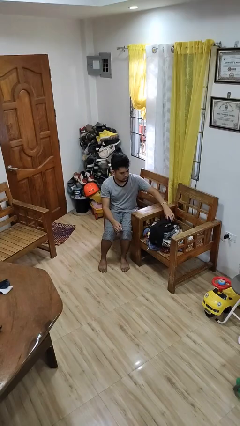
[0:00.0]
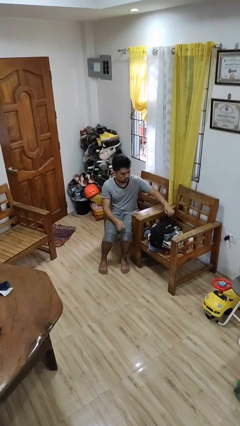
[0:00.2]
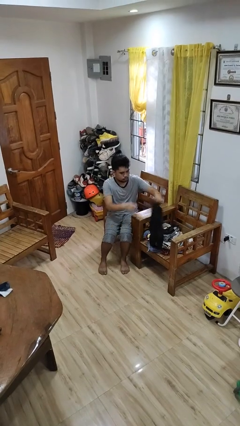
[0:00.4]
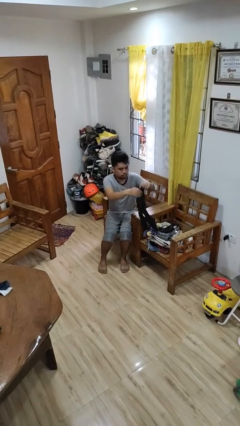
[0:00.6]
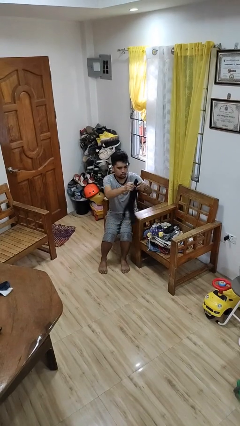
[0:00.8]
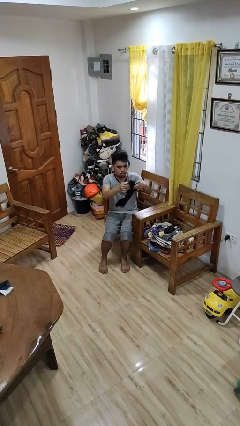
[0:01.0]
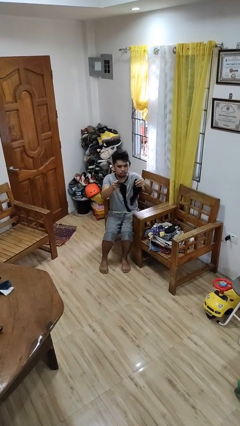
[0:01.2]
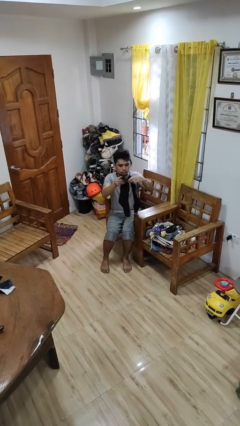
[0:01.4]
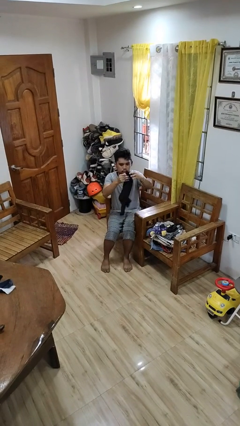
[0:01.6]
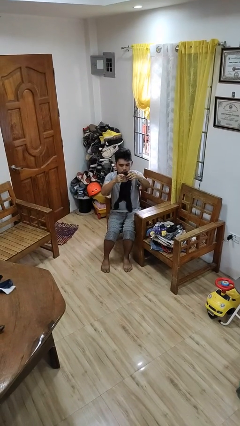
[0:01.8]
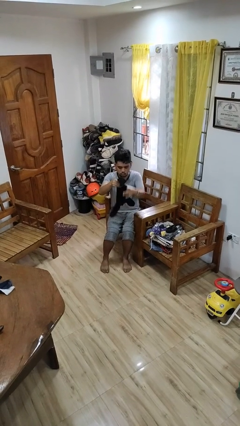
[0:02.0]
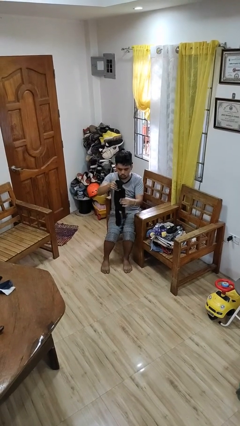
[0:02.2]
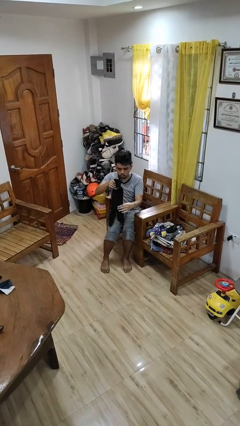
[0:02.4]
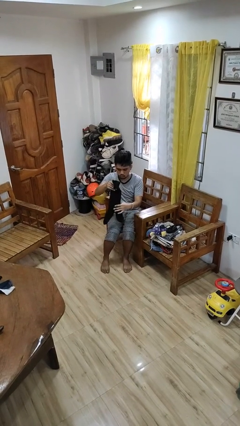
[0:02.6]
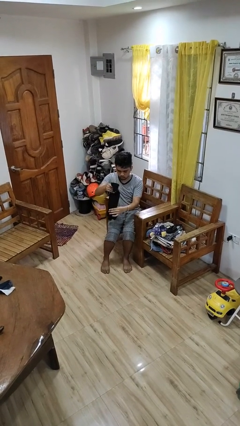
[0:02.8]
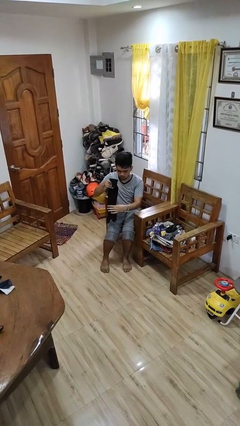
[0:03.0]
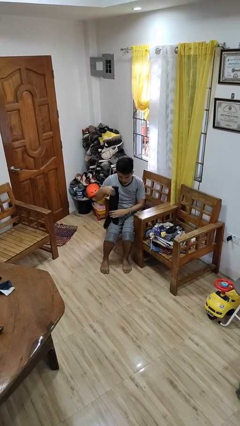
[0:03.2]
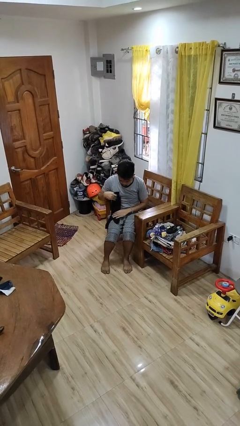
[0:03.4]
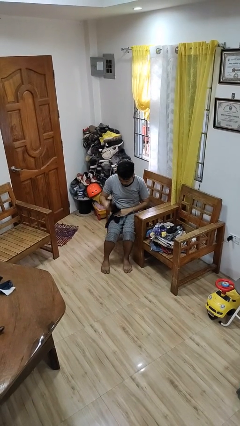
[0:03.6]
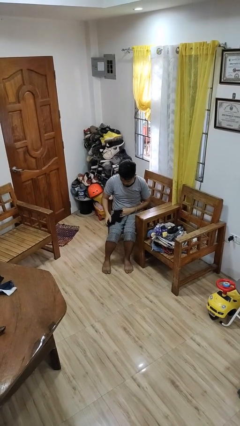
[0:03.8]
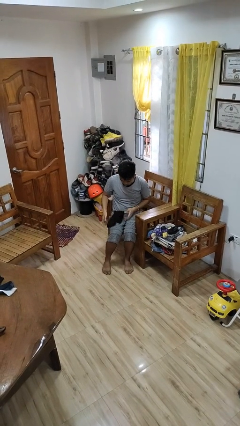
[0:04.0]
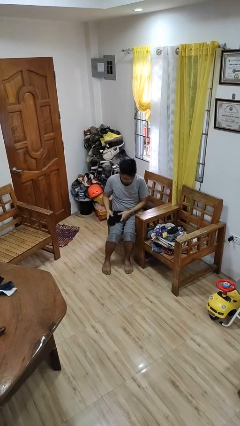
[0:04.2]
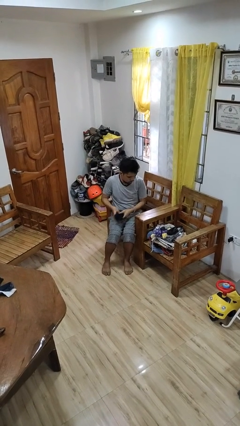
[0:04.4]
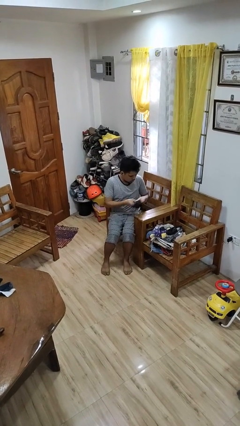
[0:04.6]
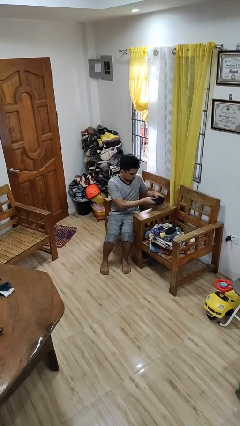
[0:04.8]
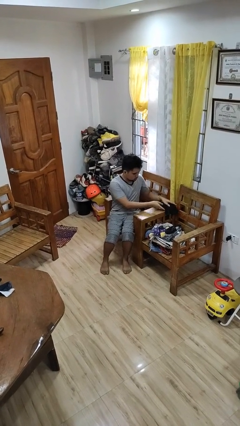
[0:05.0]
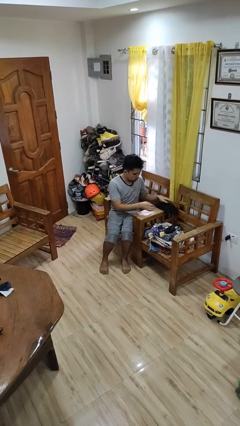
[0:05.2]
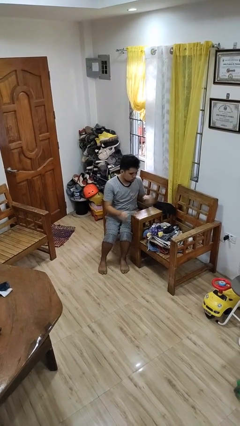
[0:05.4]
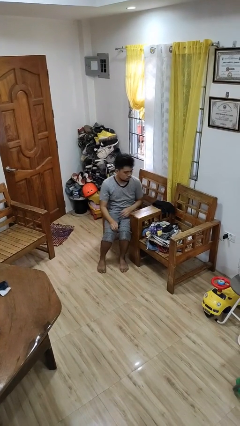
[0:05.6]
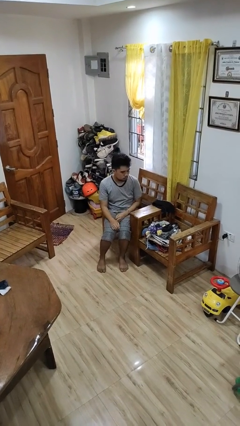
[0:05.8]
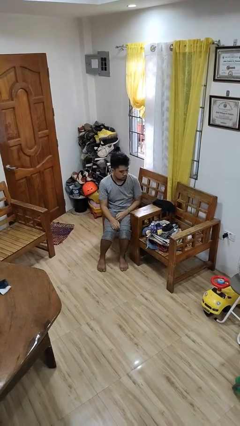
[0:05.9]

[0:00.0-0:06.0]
person folds socks

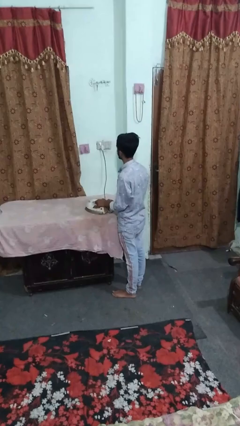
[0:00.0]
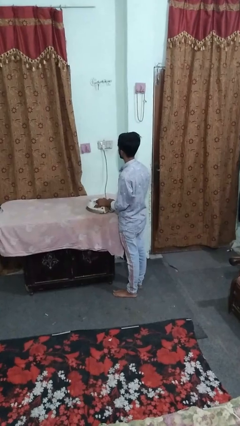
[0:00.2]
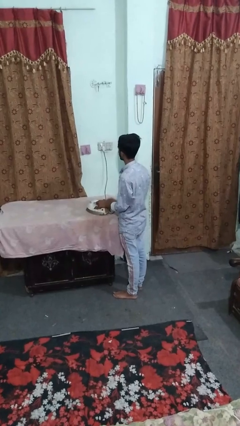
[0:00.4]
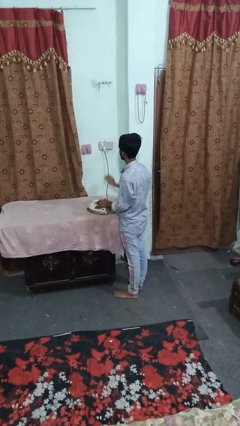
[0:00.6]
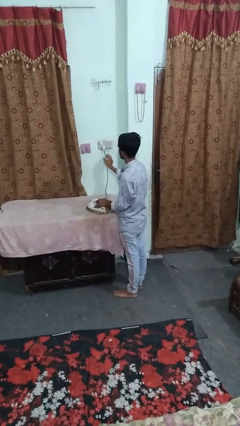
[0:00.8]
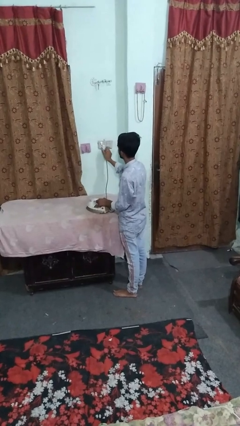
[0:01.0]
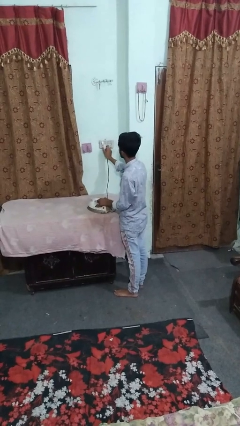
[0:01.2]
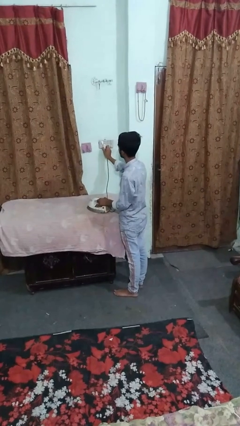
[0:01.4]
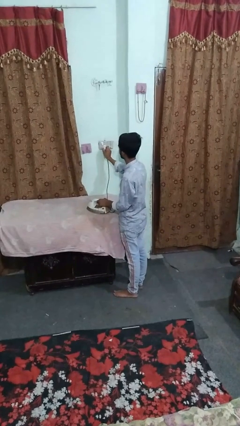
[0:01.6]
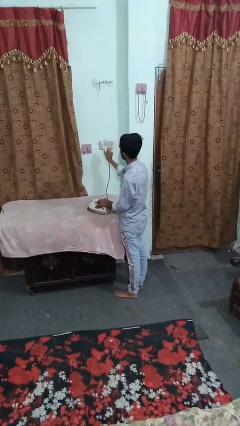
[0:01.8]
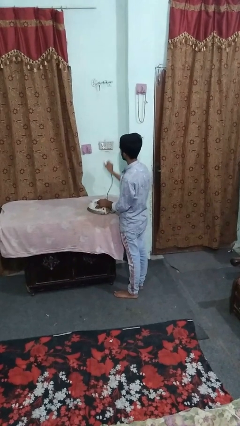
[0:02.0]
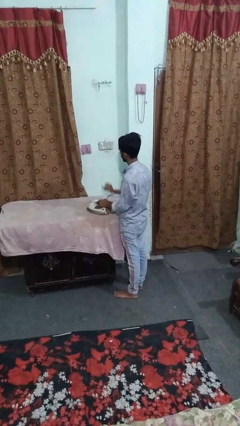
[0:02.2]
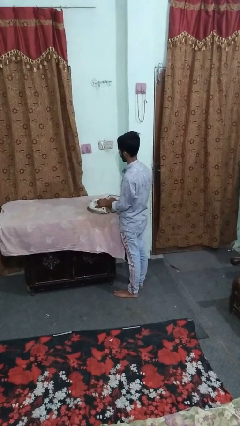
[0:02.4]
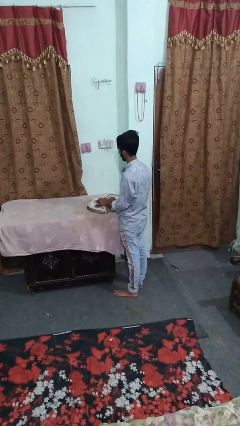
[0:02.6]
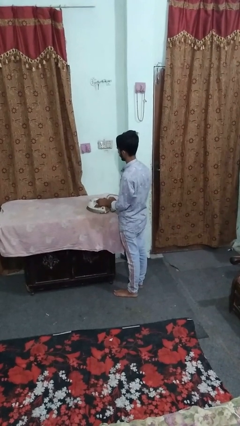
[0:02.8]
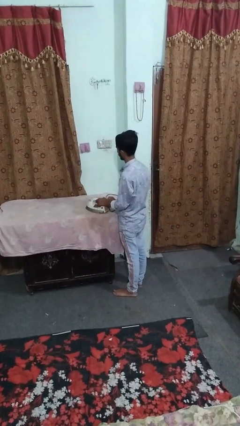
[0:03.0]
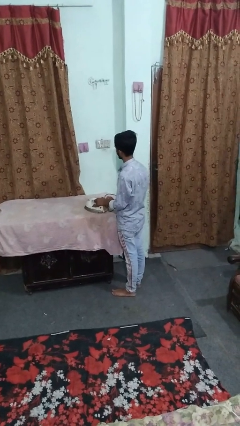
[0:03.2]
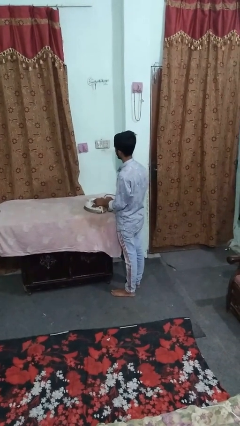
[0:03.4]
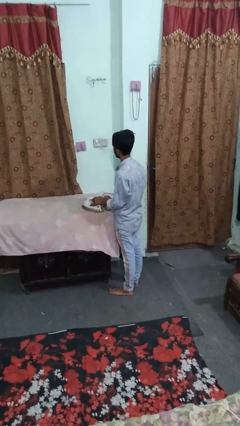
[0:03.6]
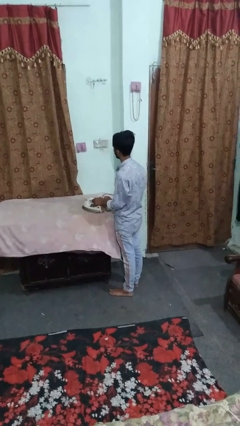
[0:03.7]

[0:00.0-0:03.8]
person unplugs from electrical socket

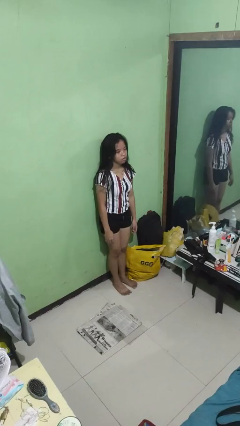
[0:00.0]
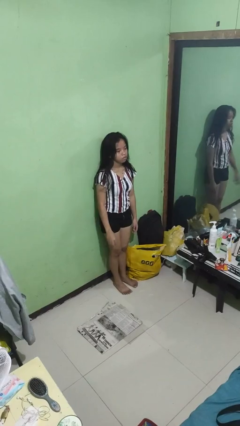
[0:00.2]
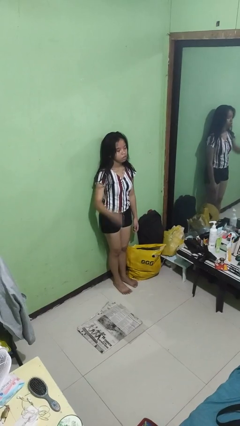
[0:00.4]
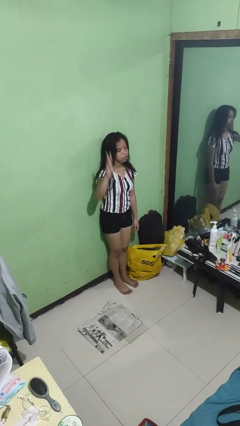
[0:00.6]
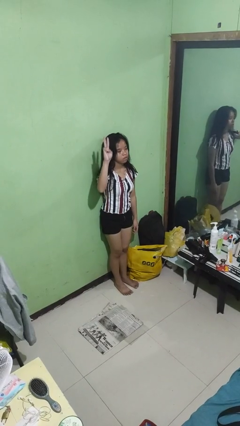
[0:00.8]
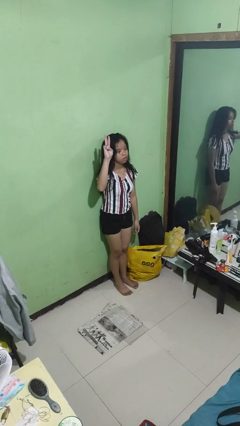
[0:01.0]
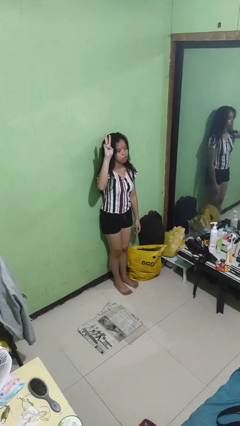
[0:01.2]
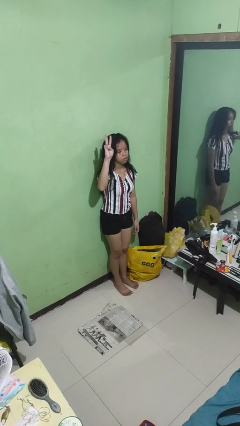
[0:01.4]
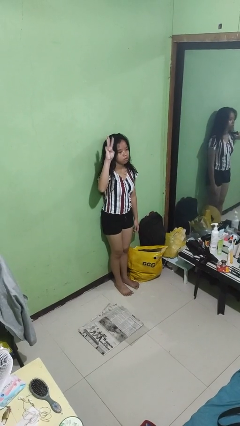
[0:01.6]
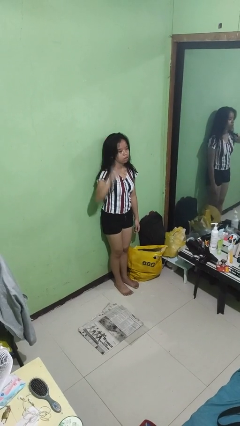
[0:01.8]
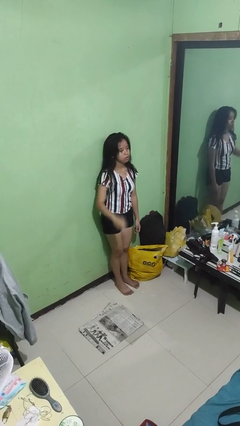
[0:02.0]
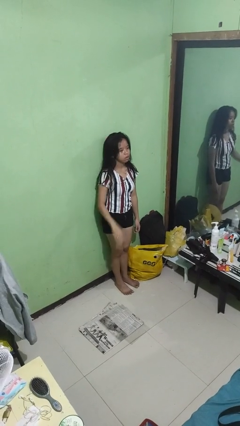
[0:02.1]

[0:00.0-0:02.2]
person gestures number three

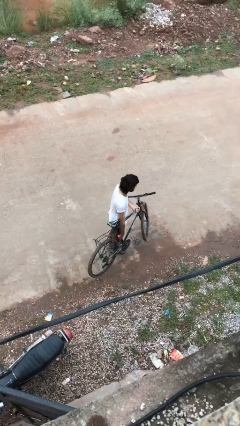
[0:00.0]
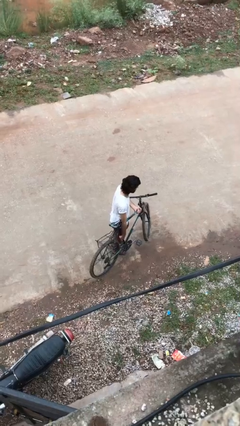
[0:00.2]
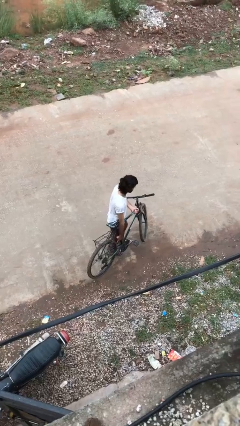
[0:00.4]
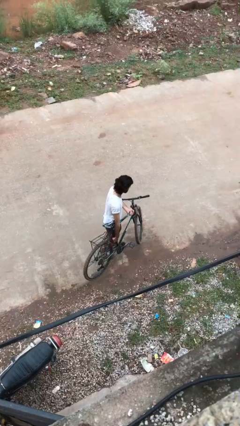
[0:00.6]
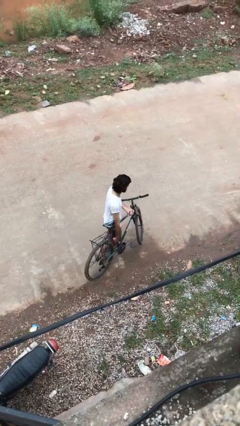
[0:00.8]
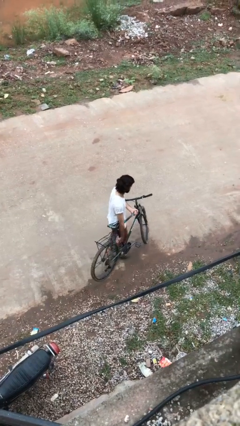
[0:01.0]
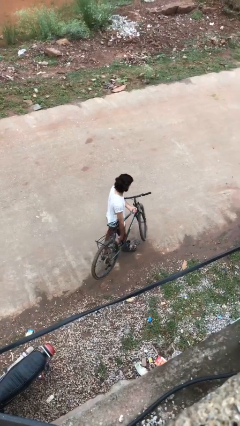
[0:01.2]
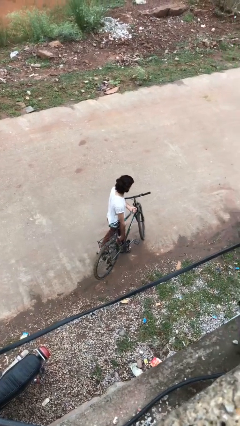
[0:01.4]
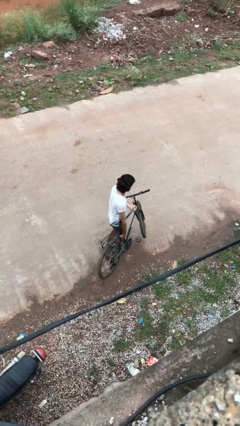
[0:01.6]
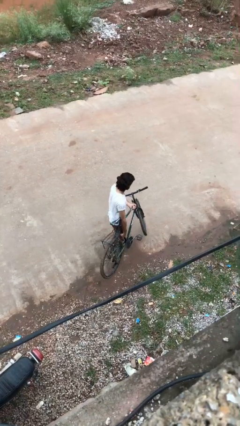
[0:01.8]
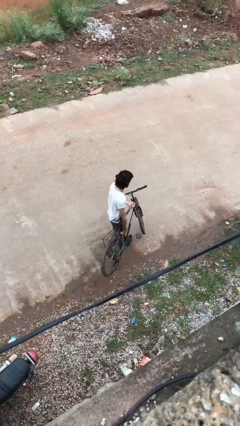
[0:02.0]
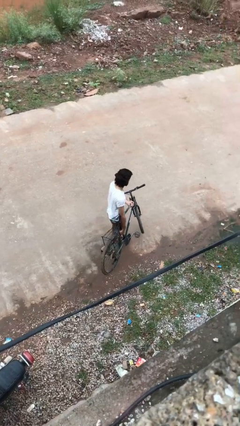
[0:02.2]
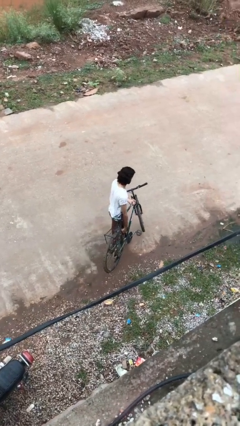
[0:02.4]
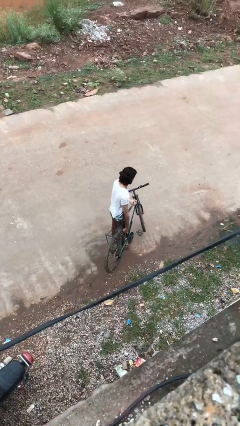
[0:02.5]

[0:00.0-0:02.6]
person carries bicycle

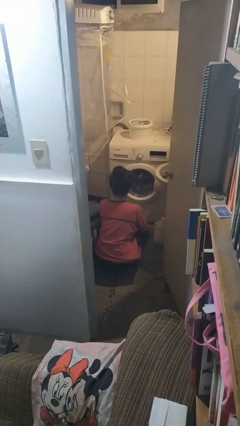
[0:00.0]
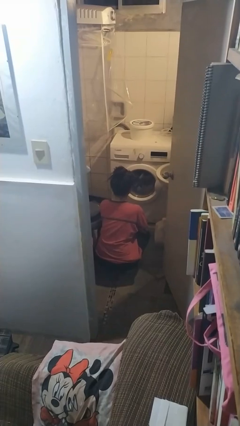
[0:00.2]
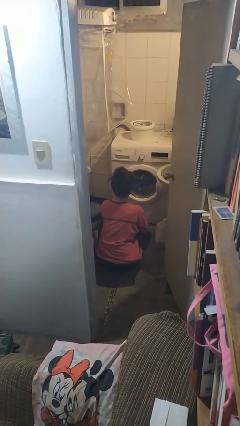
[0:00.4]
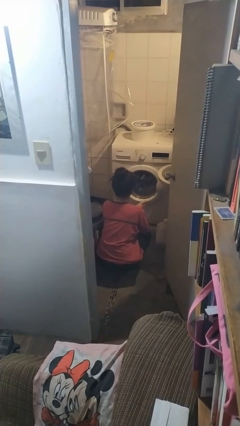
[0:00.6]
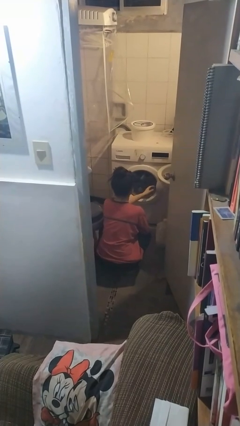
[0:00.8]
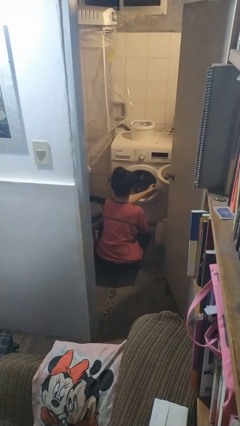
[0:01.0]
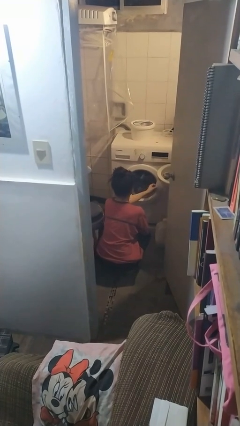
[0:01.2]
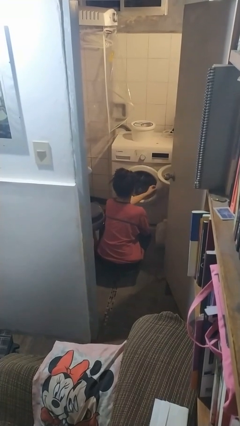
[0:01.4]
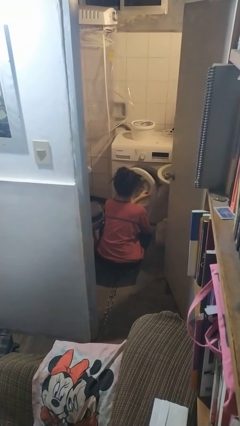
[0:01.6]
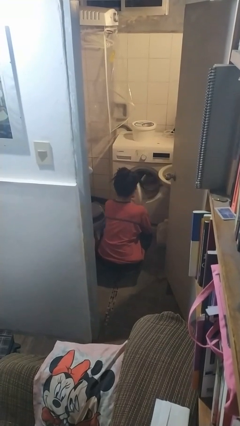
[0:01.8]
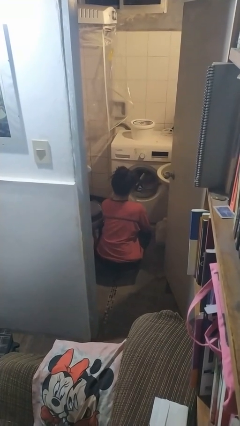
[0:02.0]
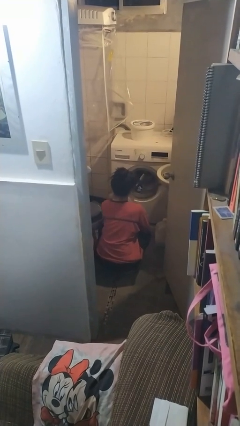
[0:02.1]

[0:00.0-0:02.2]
person opens clothes washer

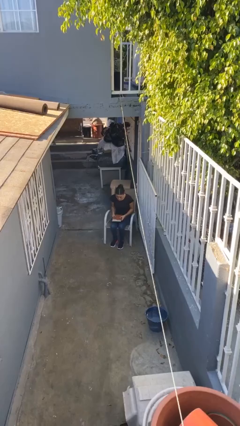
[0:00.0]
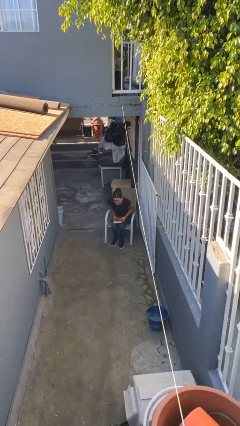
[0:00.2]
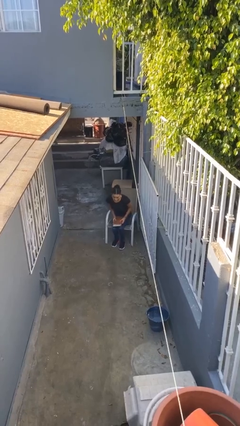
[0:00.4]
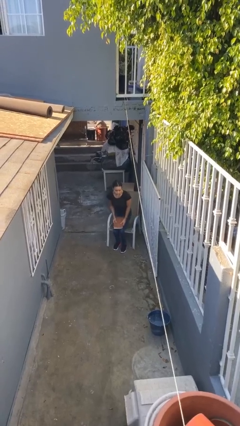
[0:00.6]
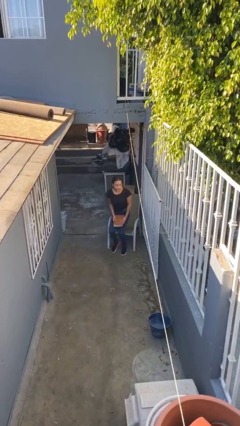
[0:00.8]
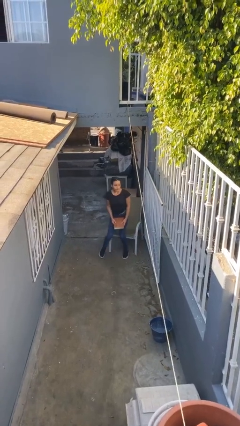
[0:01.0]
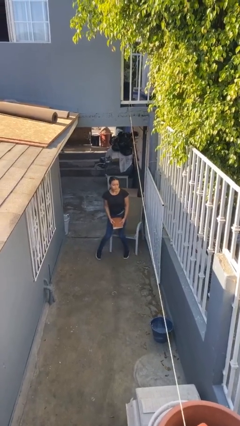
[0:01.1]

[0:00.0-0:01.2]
person stands up
